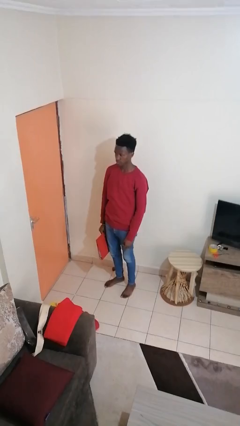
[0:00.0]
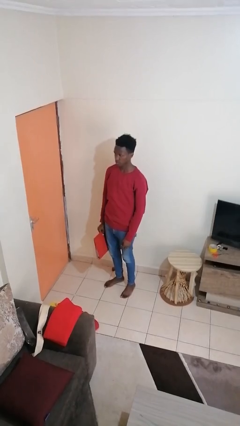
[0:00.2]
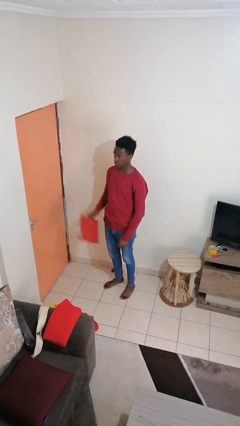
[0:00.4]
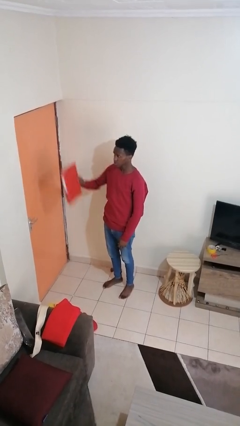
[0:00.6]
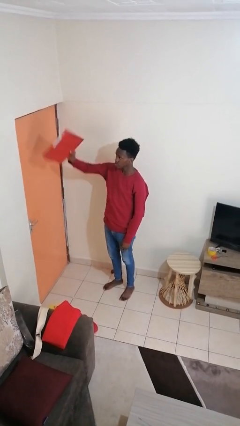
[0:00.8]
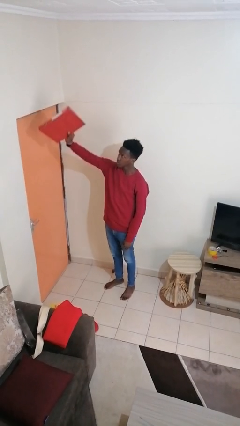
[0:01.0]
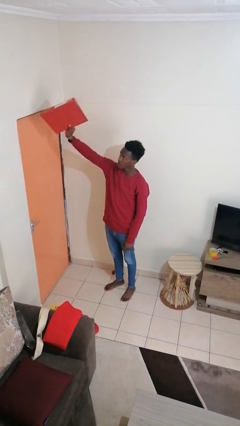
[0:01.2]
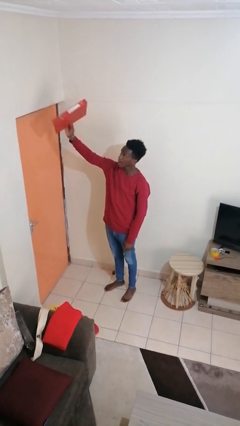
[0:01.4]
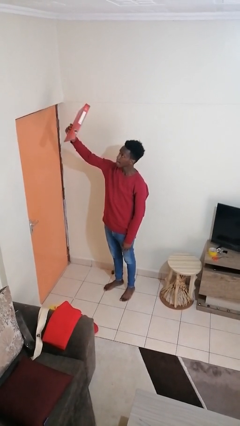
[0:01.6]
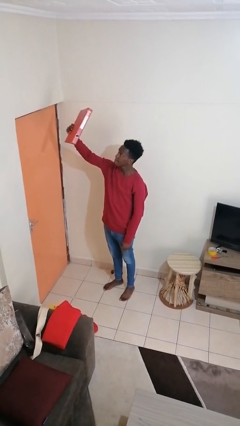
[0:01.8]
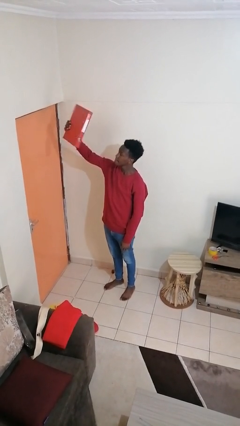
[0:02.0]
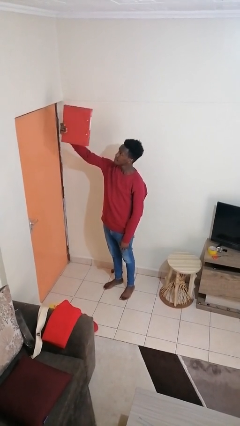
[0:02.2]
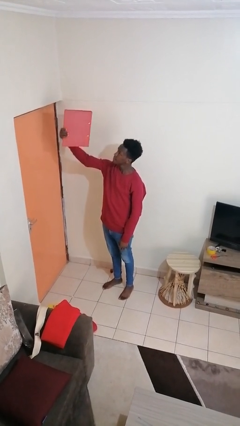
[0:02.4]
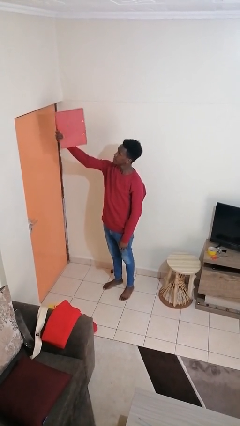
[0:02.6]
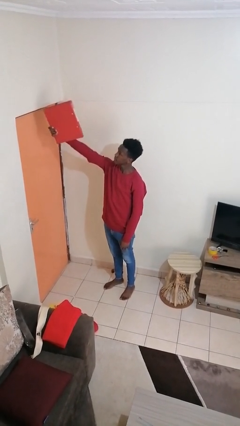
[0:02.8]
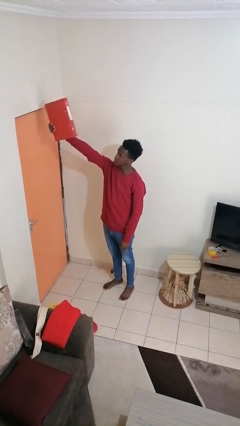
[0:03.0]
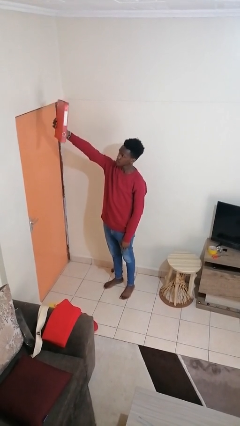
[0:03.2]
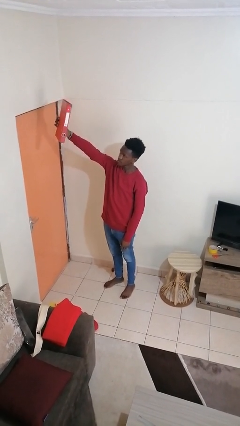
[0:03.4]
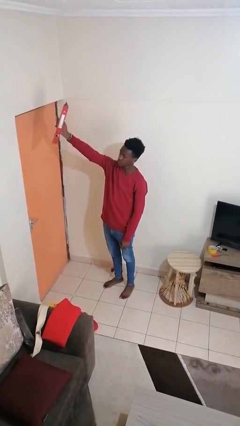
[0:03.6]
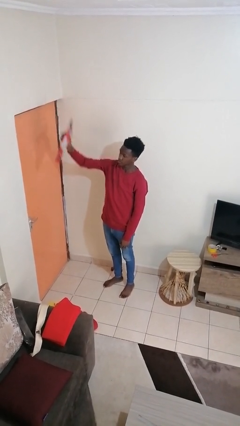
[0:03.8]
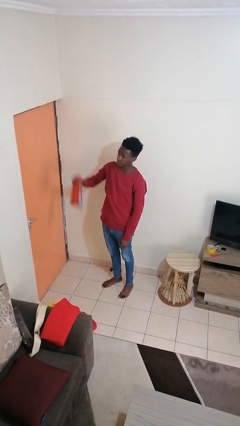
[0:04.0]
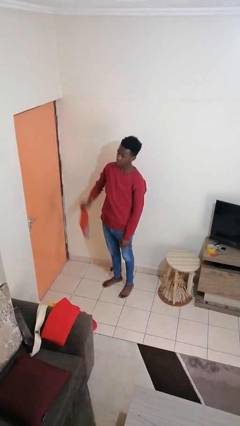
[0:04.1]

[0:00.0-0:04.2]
person holds object above head

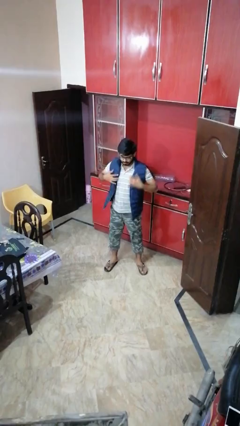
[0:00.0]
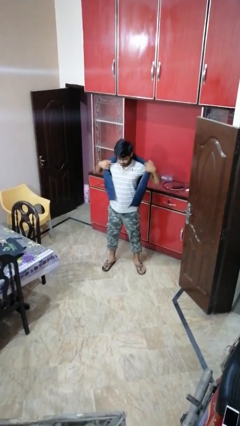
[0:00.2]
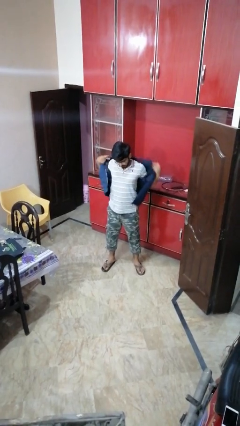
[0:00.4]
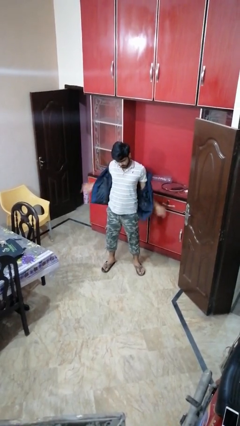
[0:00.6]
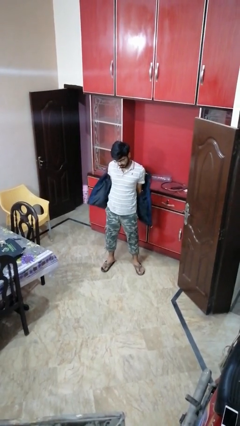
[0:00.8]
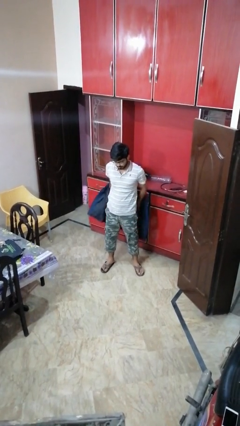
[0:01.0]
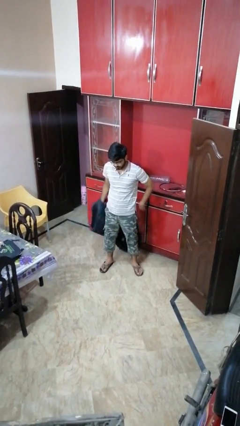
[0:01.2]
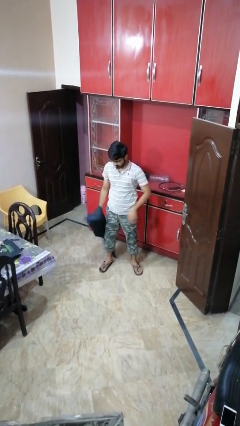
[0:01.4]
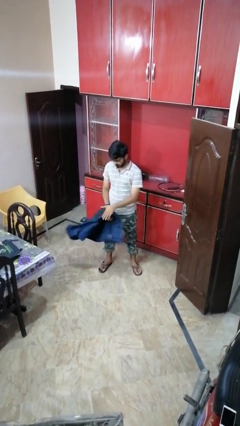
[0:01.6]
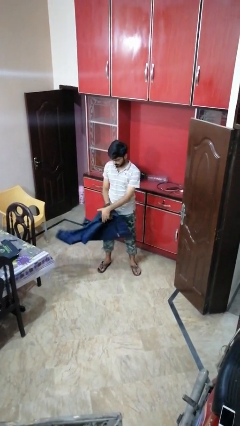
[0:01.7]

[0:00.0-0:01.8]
person takes off jacket

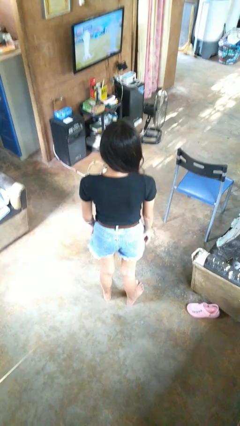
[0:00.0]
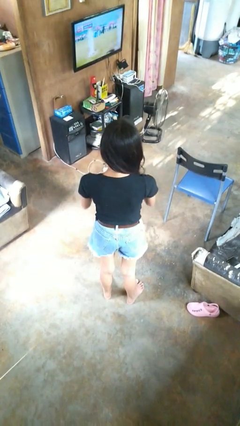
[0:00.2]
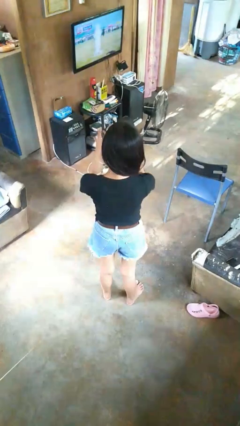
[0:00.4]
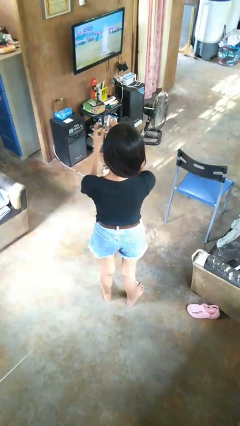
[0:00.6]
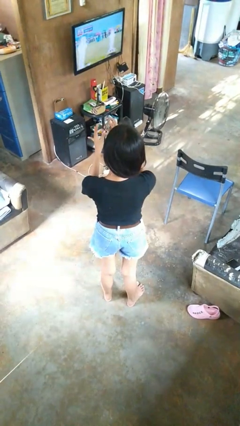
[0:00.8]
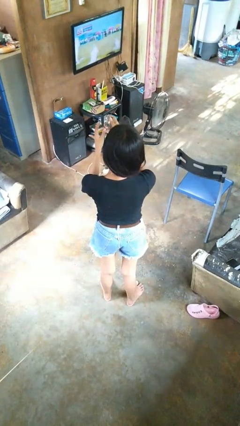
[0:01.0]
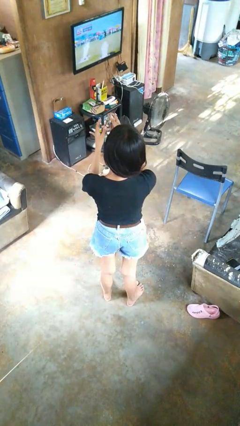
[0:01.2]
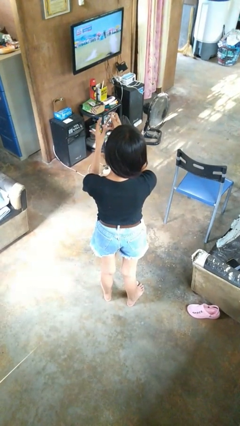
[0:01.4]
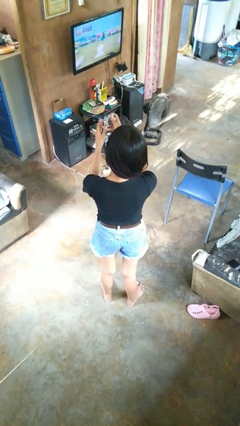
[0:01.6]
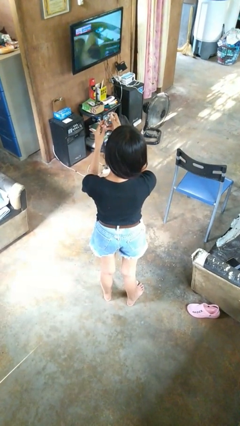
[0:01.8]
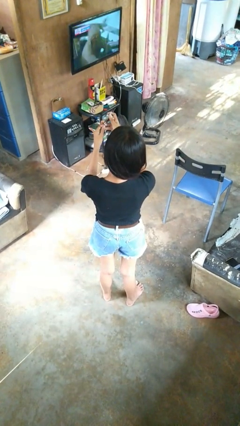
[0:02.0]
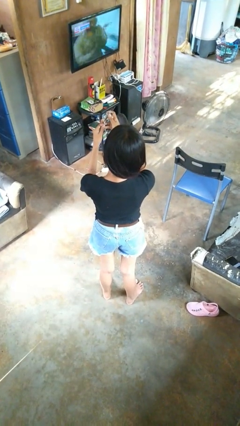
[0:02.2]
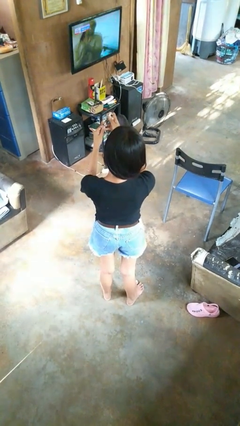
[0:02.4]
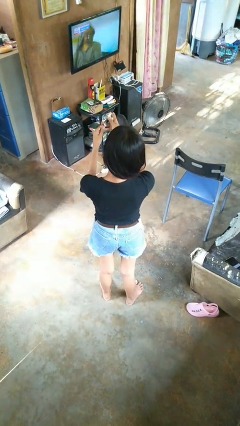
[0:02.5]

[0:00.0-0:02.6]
person clips fingernails

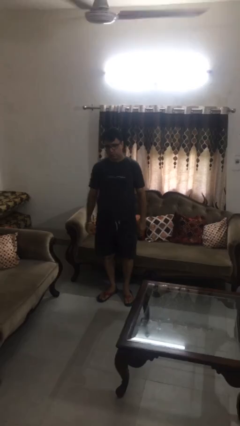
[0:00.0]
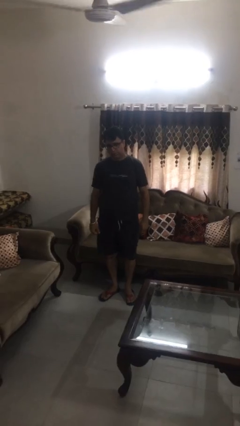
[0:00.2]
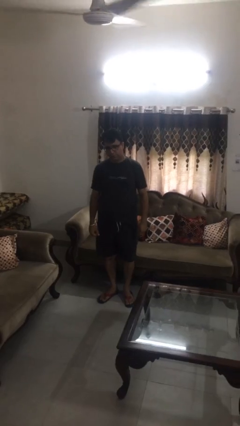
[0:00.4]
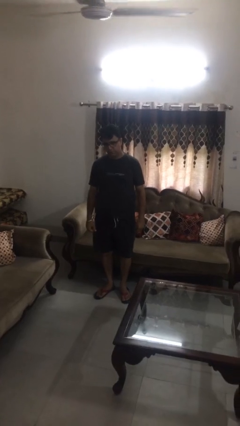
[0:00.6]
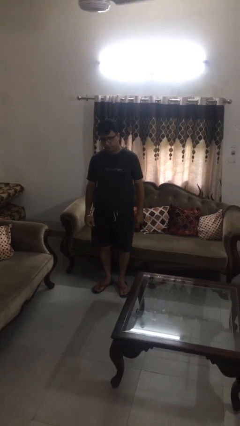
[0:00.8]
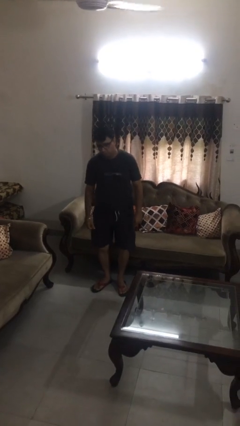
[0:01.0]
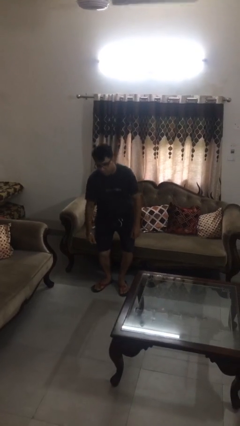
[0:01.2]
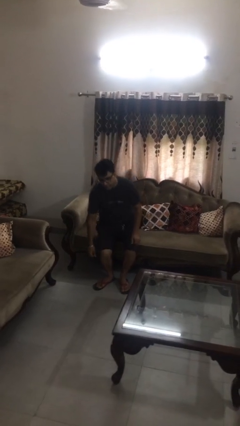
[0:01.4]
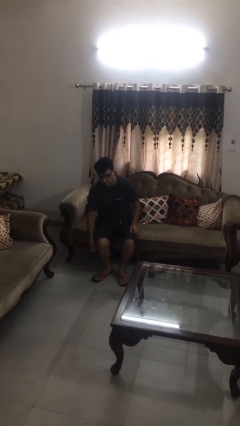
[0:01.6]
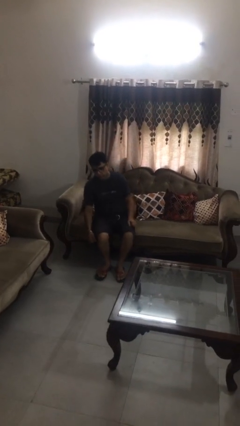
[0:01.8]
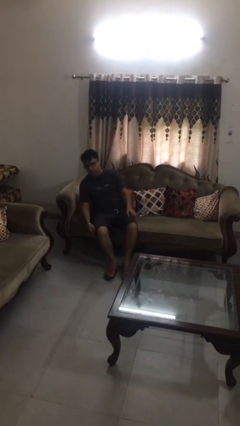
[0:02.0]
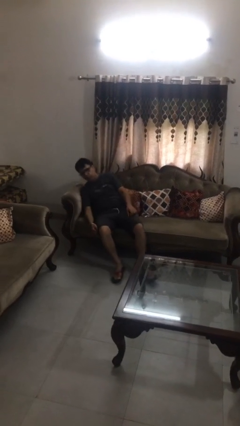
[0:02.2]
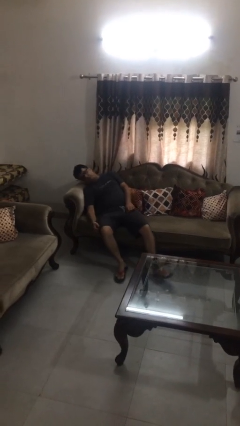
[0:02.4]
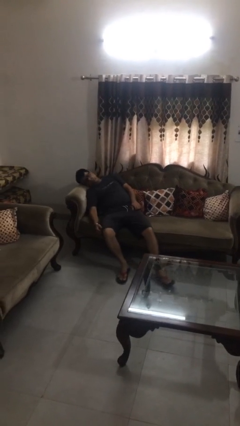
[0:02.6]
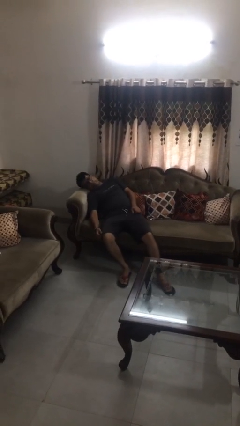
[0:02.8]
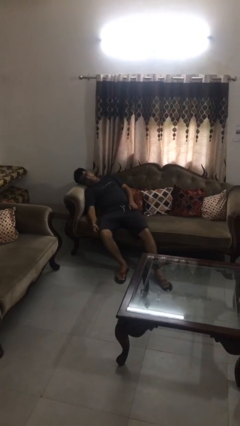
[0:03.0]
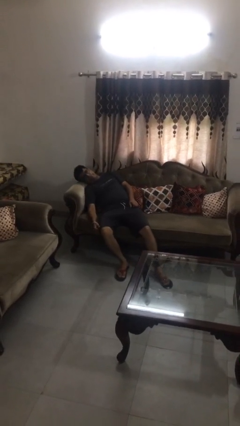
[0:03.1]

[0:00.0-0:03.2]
person lies down on couch

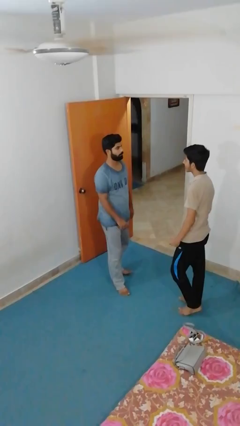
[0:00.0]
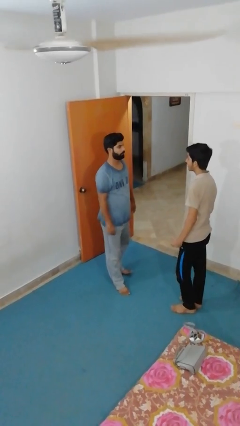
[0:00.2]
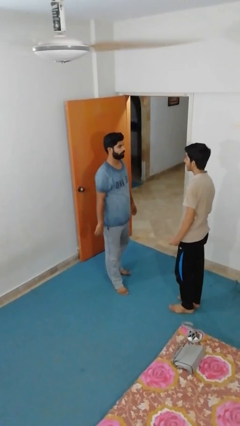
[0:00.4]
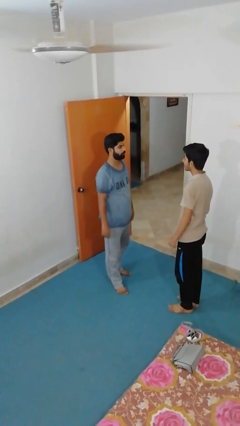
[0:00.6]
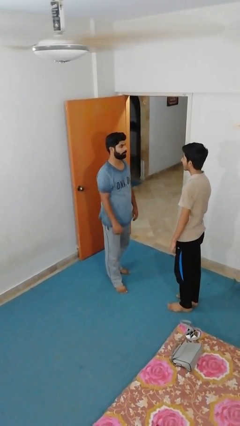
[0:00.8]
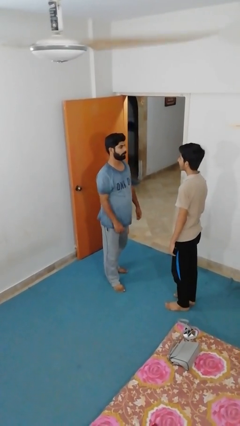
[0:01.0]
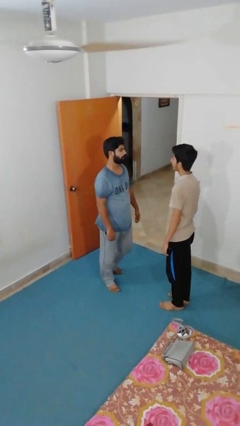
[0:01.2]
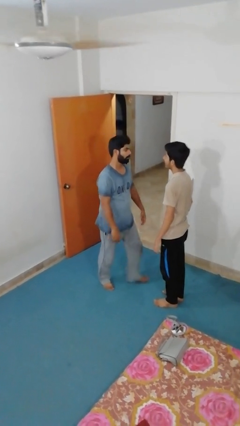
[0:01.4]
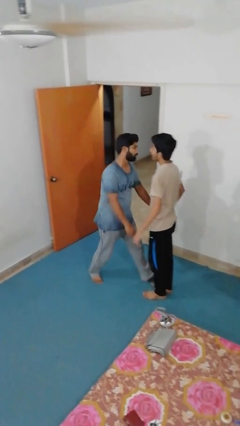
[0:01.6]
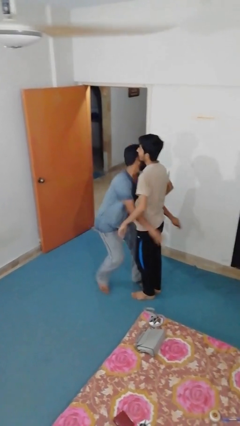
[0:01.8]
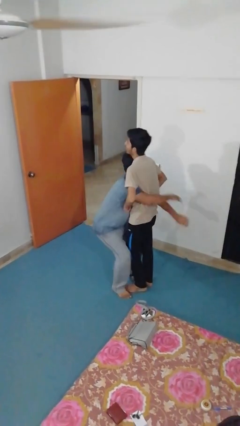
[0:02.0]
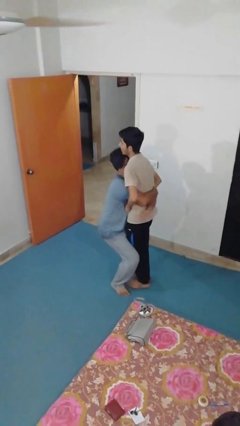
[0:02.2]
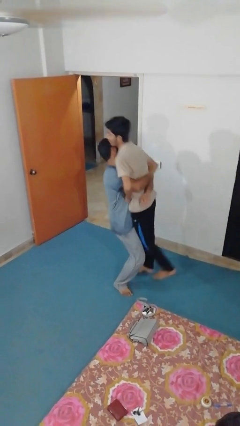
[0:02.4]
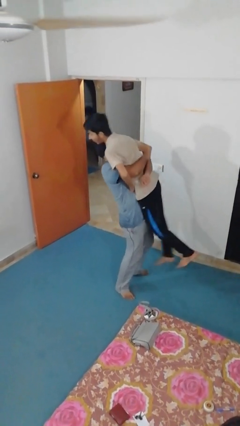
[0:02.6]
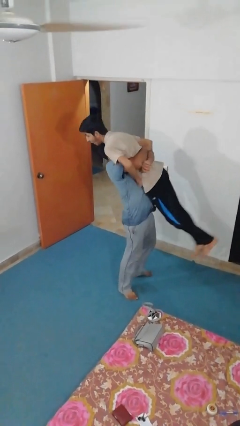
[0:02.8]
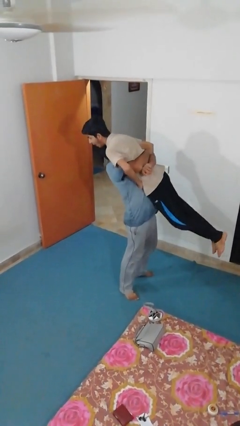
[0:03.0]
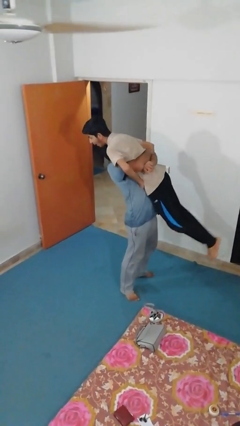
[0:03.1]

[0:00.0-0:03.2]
person picks up person

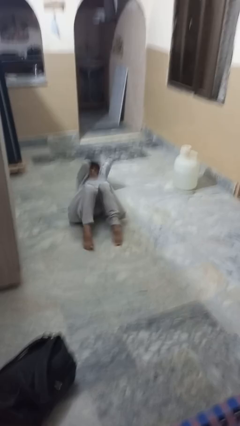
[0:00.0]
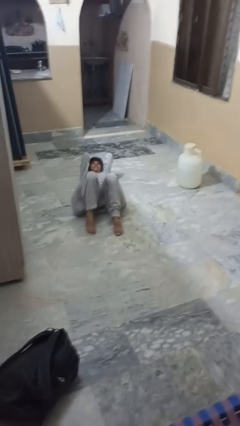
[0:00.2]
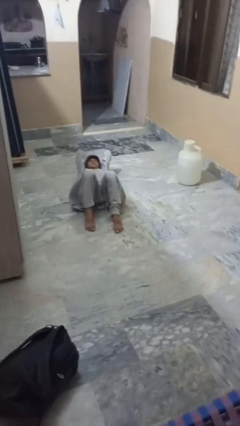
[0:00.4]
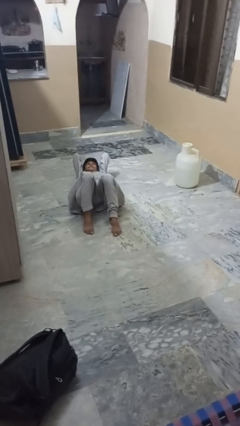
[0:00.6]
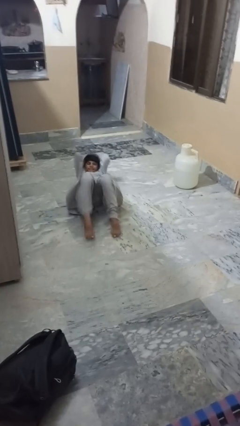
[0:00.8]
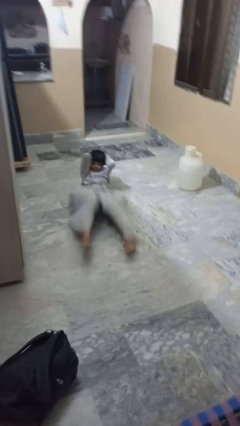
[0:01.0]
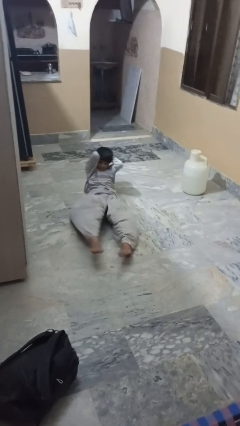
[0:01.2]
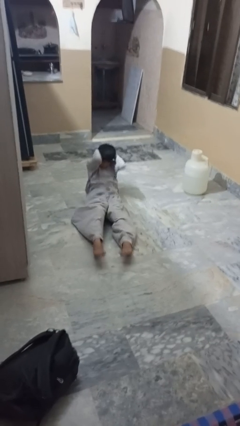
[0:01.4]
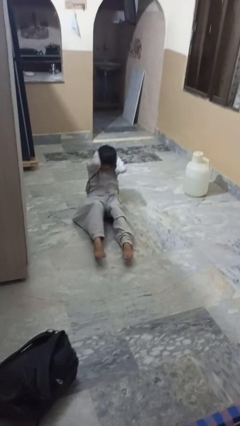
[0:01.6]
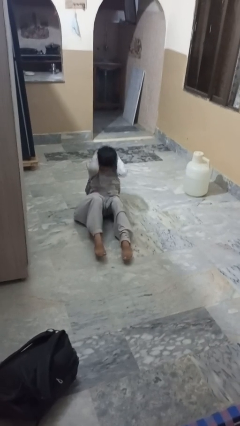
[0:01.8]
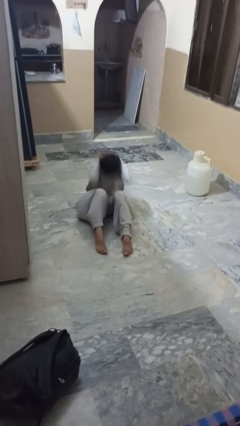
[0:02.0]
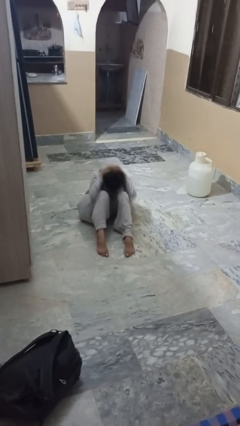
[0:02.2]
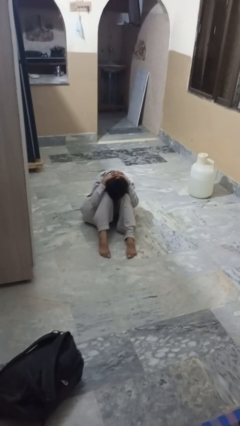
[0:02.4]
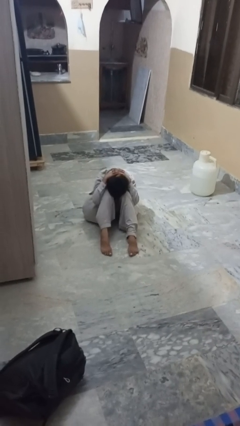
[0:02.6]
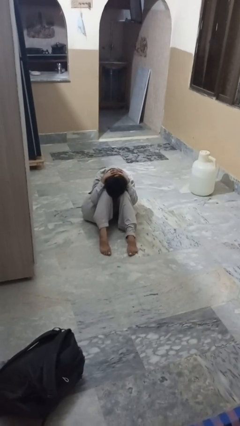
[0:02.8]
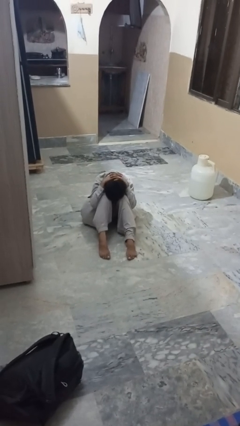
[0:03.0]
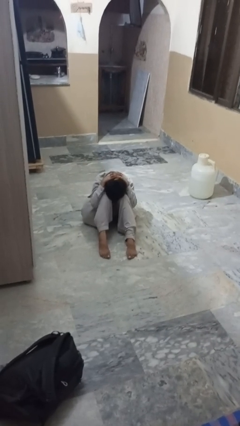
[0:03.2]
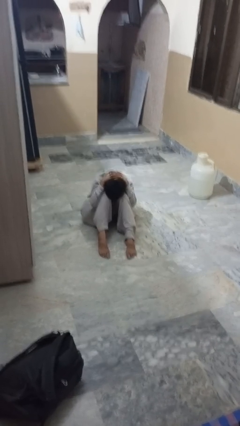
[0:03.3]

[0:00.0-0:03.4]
person exercises with situp
